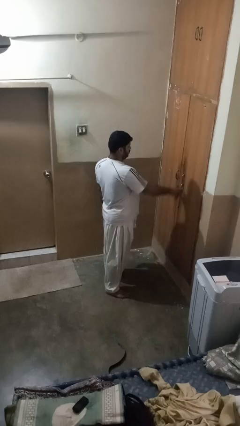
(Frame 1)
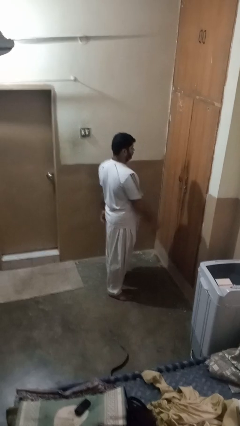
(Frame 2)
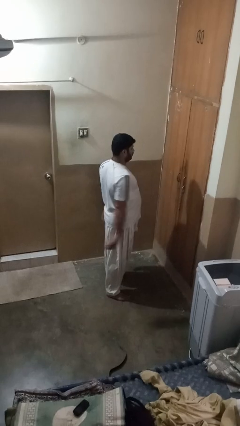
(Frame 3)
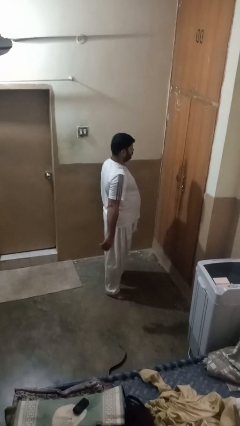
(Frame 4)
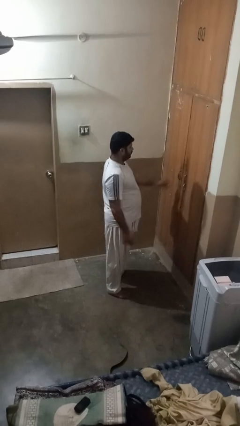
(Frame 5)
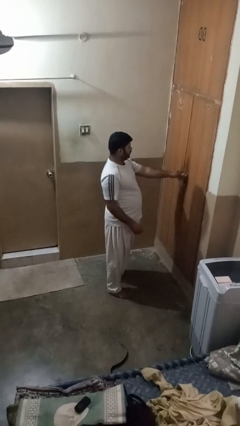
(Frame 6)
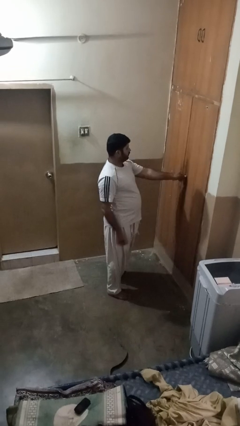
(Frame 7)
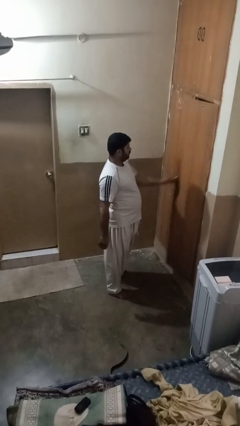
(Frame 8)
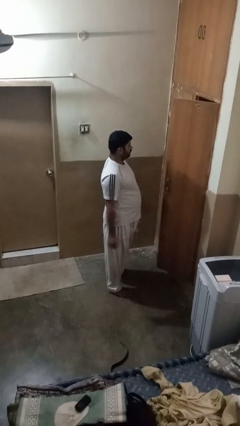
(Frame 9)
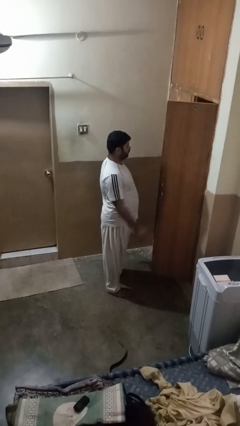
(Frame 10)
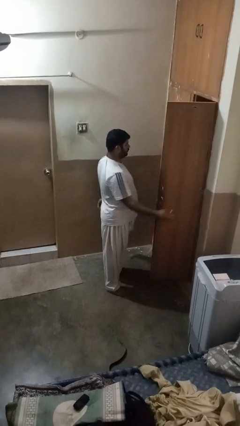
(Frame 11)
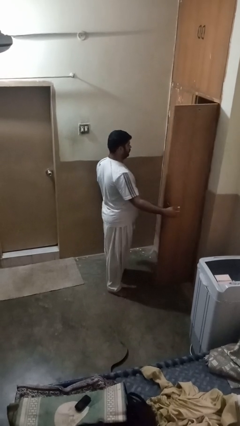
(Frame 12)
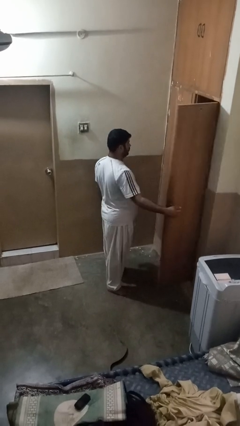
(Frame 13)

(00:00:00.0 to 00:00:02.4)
person opens closet door

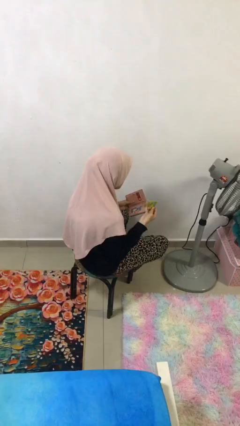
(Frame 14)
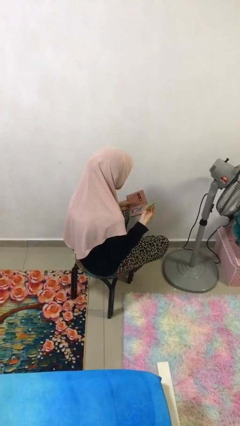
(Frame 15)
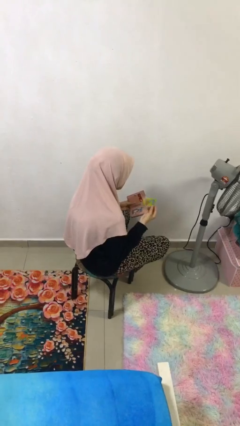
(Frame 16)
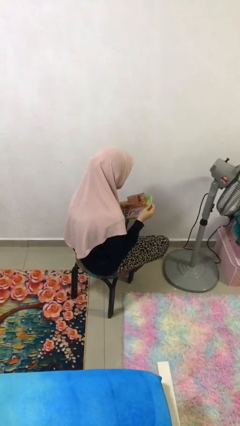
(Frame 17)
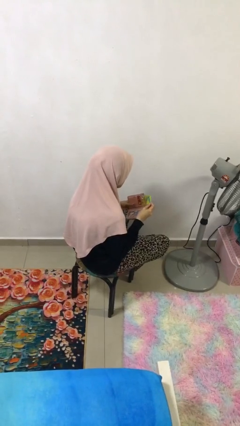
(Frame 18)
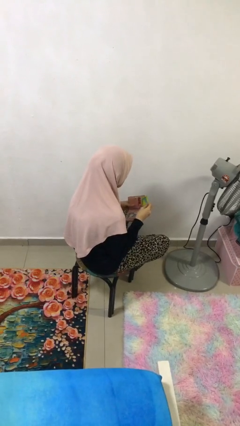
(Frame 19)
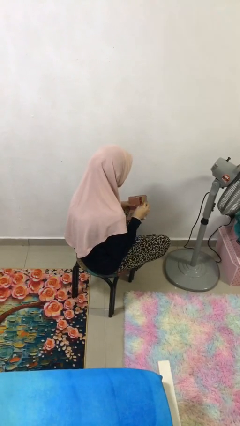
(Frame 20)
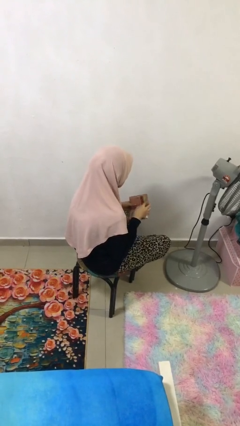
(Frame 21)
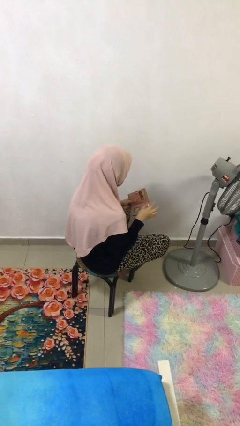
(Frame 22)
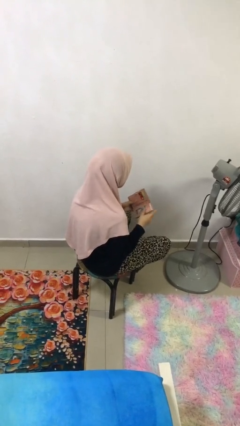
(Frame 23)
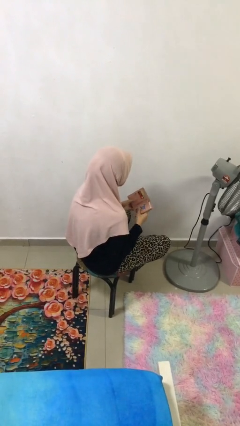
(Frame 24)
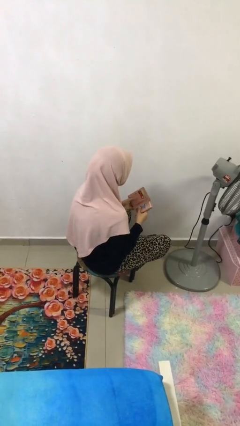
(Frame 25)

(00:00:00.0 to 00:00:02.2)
person puts object into purse

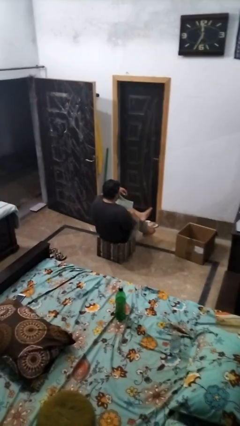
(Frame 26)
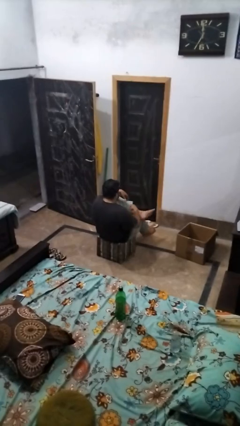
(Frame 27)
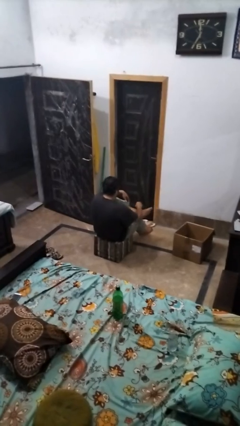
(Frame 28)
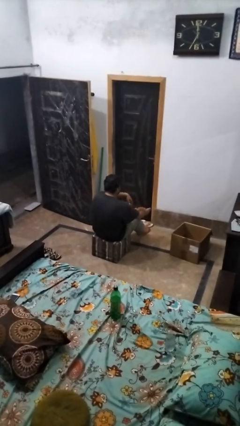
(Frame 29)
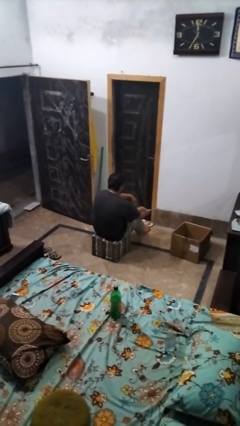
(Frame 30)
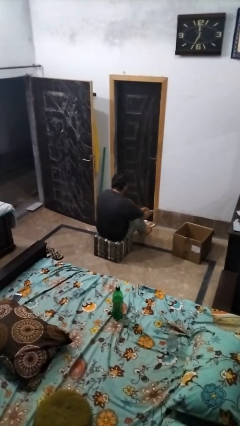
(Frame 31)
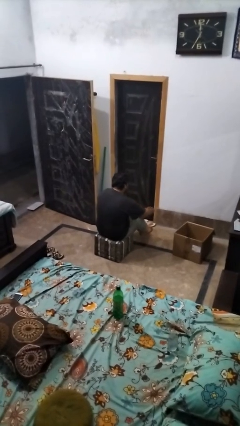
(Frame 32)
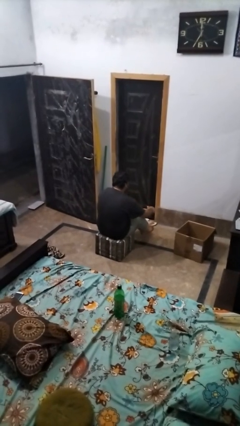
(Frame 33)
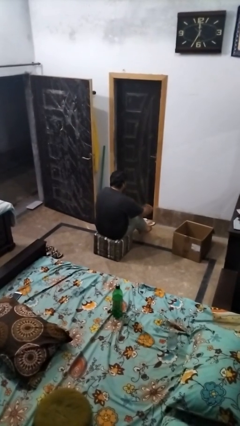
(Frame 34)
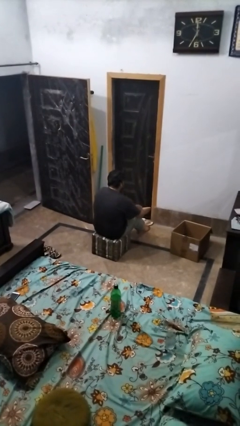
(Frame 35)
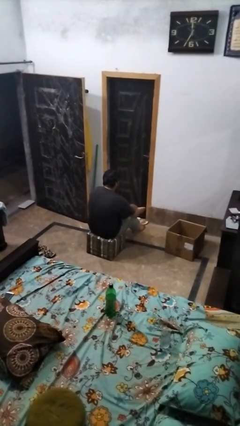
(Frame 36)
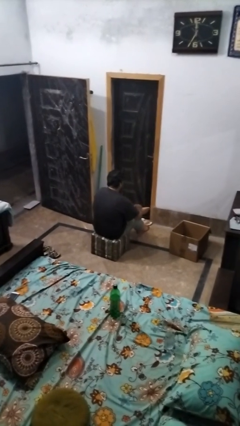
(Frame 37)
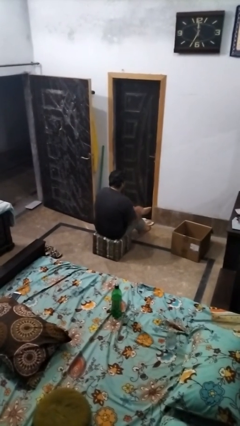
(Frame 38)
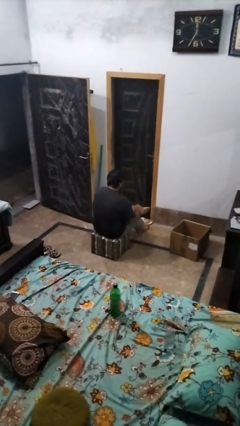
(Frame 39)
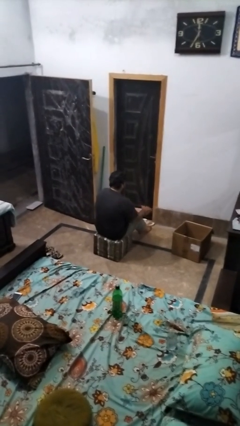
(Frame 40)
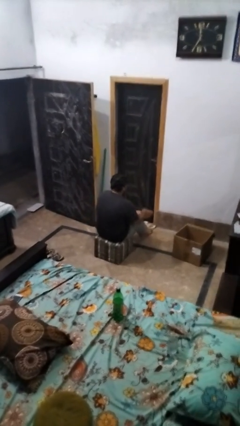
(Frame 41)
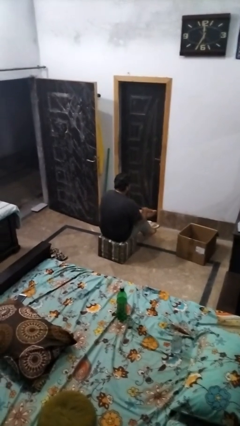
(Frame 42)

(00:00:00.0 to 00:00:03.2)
person rubs foot

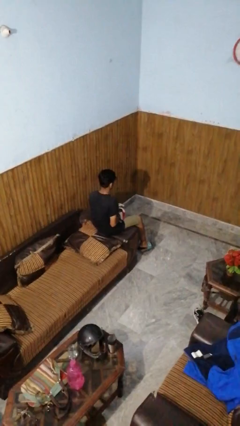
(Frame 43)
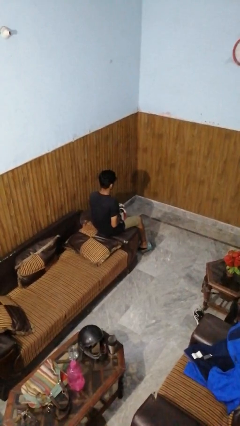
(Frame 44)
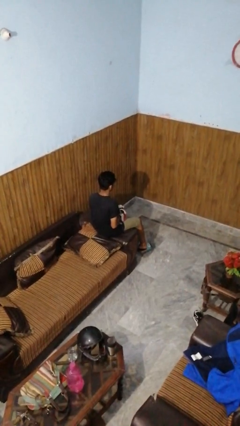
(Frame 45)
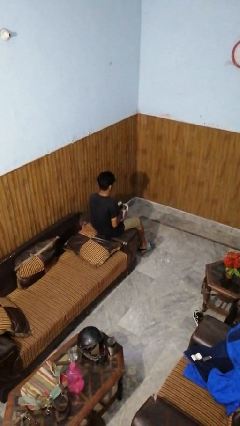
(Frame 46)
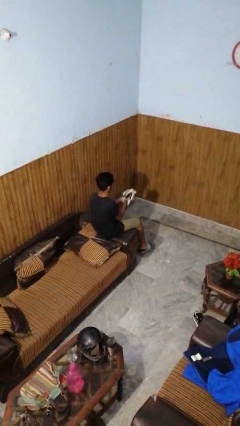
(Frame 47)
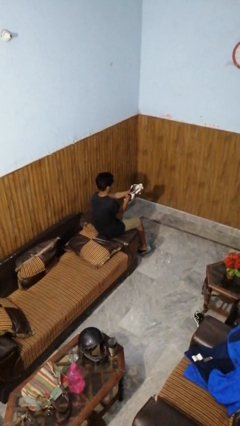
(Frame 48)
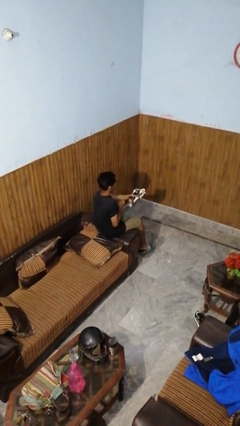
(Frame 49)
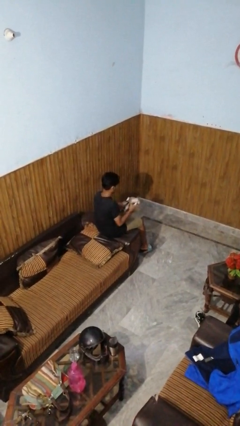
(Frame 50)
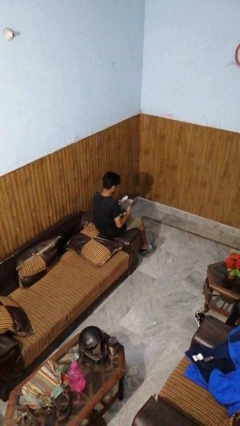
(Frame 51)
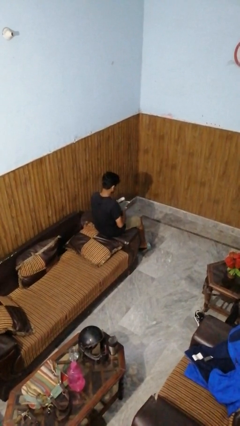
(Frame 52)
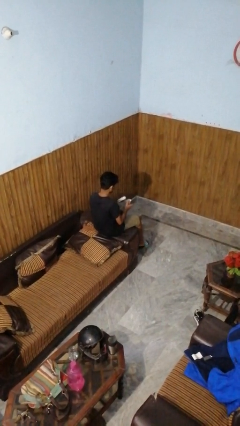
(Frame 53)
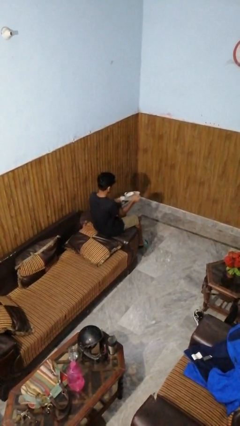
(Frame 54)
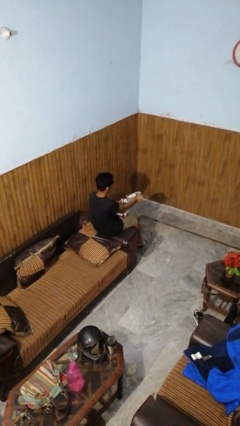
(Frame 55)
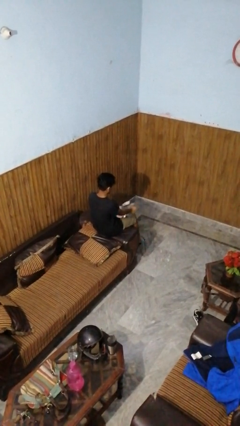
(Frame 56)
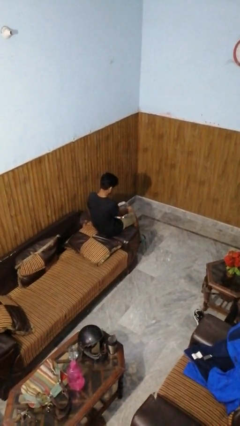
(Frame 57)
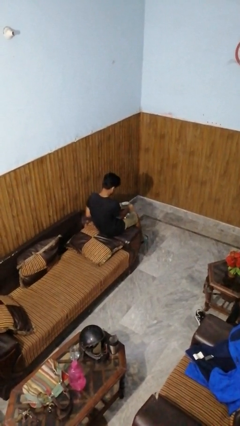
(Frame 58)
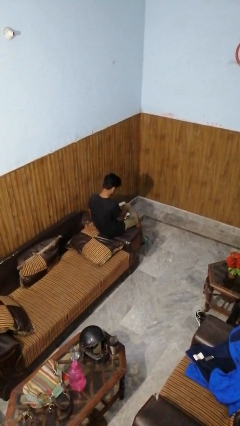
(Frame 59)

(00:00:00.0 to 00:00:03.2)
person takes off gloves

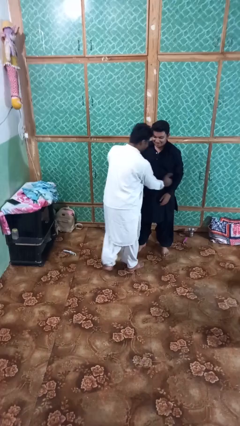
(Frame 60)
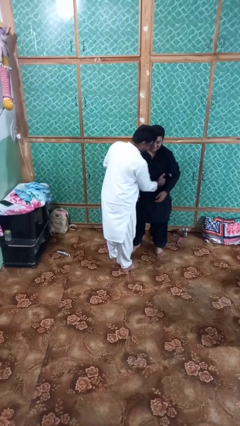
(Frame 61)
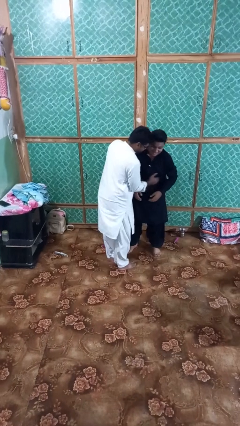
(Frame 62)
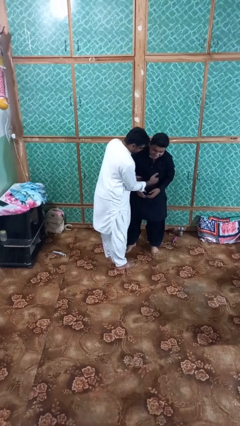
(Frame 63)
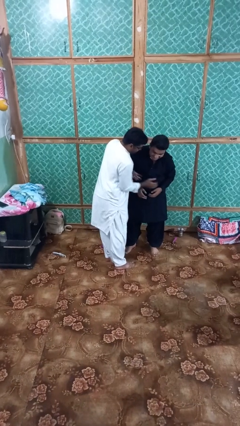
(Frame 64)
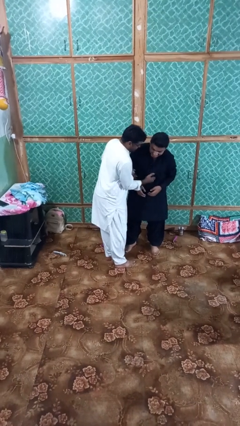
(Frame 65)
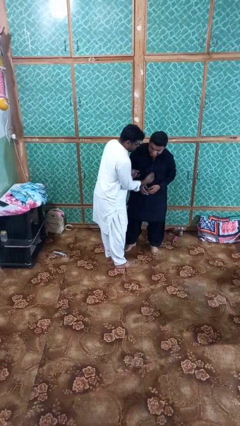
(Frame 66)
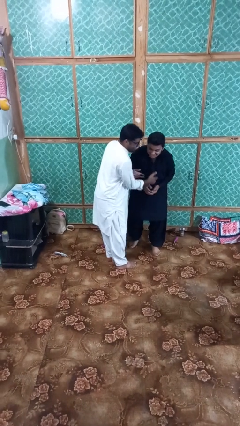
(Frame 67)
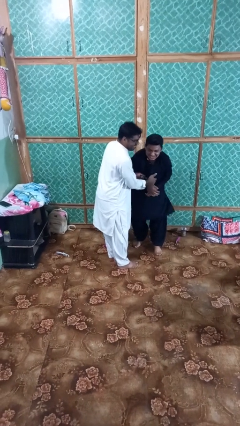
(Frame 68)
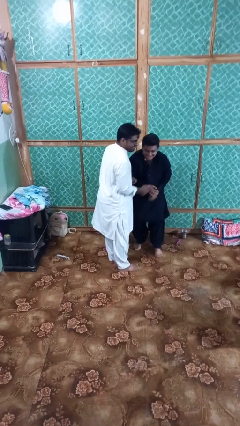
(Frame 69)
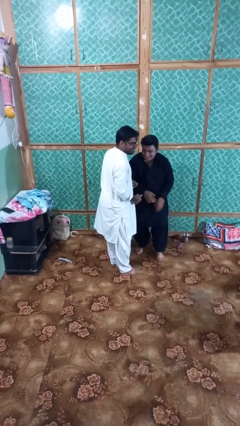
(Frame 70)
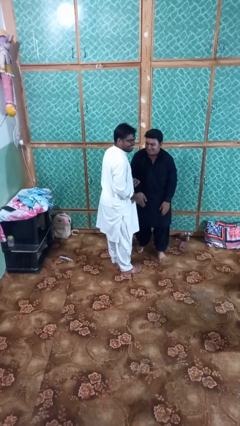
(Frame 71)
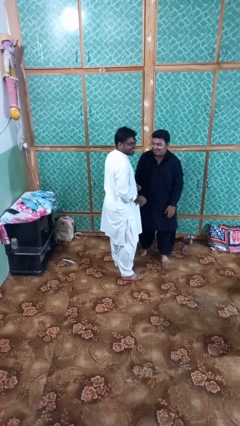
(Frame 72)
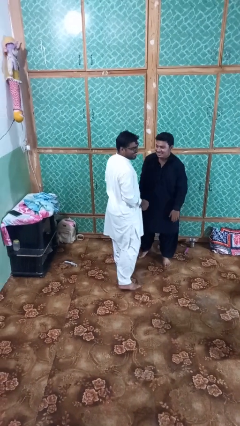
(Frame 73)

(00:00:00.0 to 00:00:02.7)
person tickles person

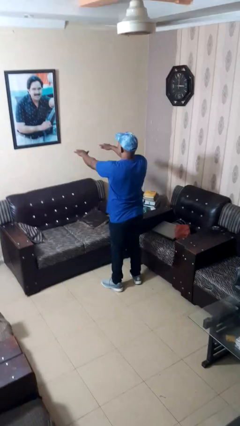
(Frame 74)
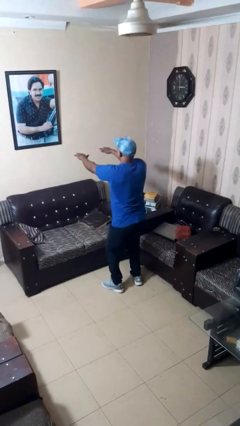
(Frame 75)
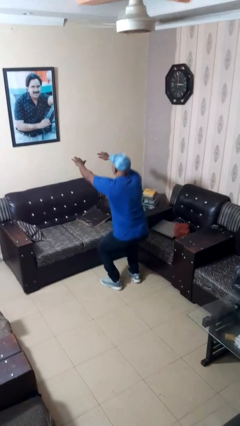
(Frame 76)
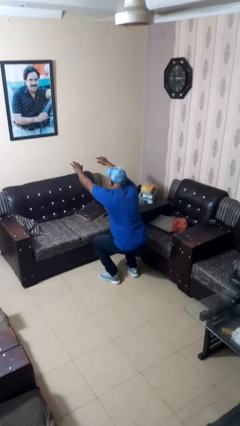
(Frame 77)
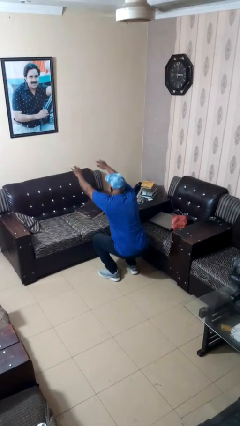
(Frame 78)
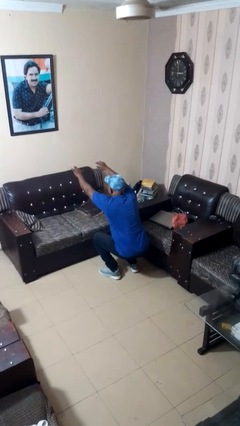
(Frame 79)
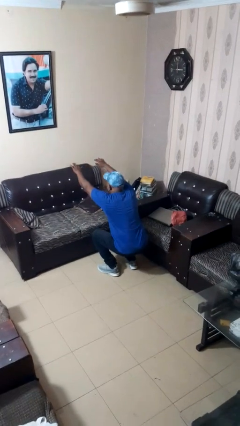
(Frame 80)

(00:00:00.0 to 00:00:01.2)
person squats

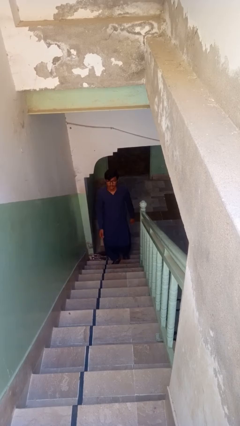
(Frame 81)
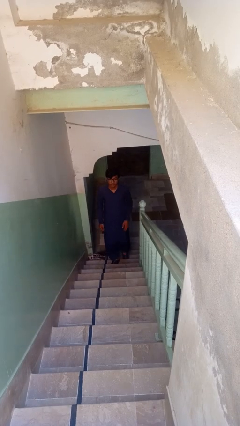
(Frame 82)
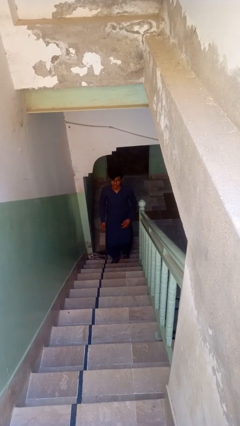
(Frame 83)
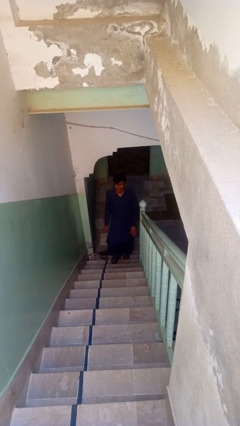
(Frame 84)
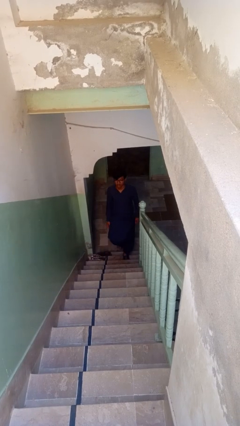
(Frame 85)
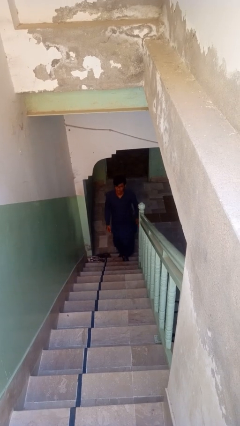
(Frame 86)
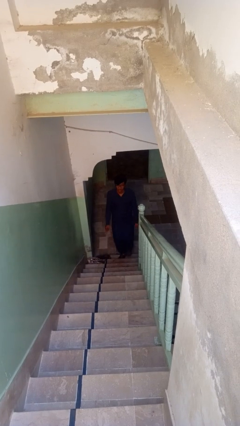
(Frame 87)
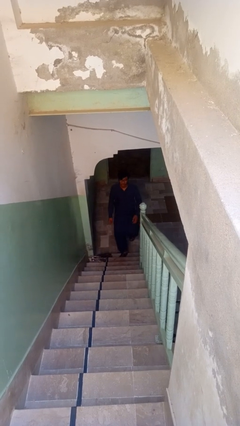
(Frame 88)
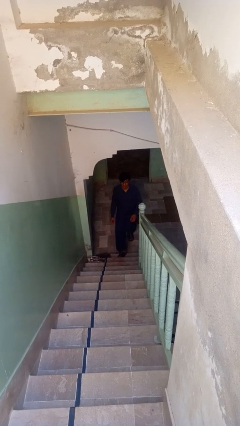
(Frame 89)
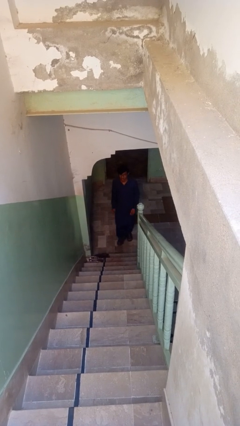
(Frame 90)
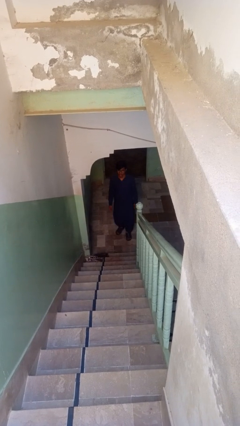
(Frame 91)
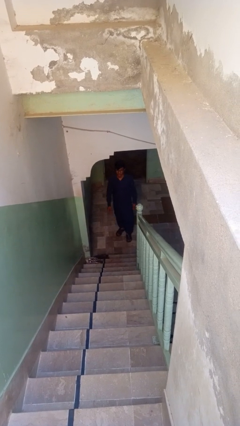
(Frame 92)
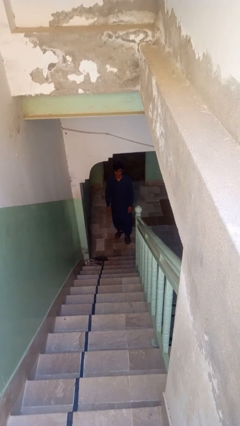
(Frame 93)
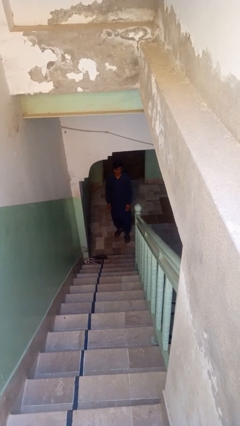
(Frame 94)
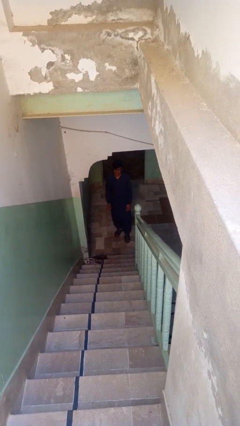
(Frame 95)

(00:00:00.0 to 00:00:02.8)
person climbs down stairs
